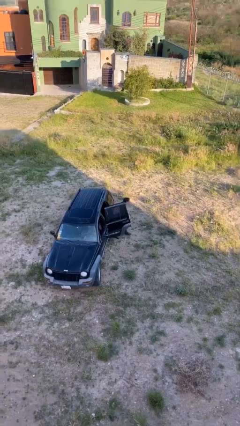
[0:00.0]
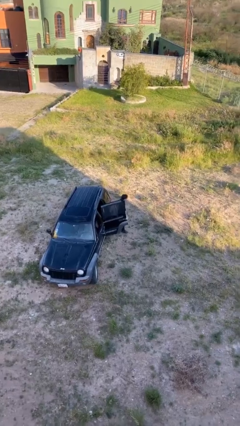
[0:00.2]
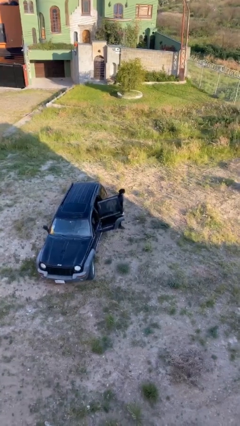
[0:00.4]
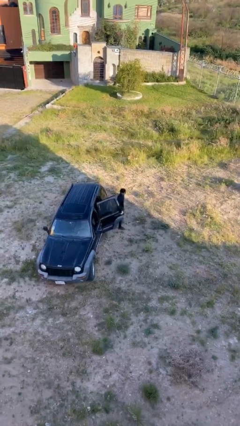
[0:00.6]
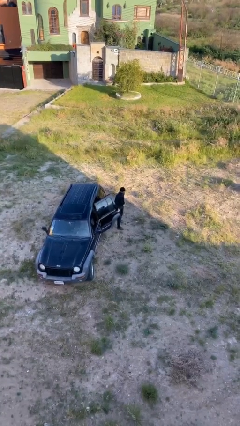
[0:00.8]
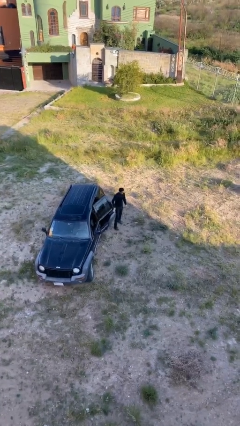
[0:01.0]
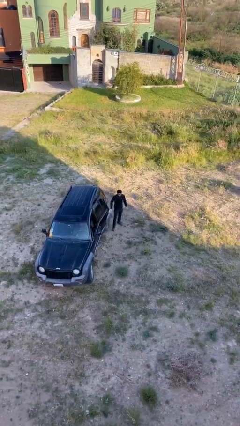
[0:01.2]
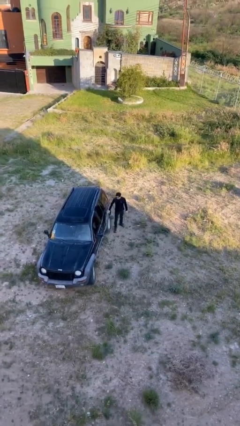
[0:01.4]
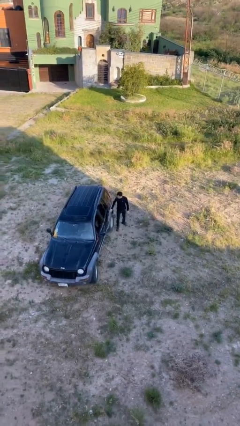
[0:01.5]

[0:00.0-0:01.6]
person exits car

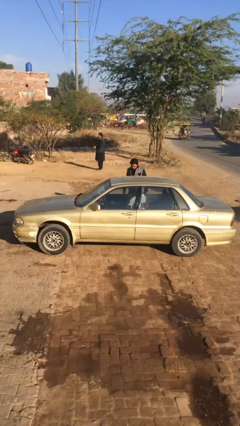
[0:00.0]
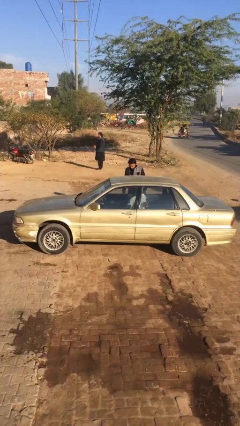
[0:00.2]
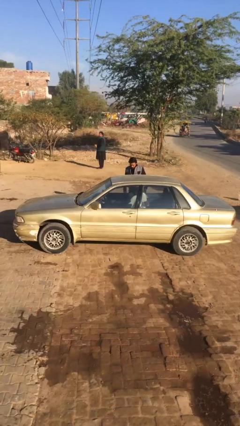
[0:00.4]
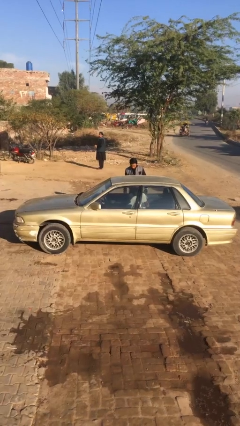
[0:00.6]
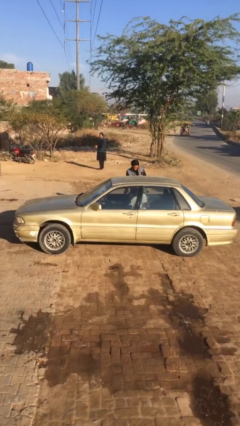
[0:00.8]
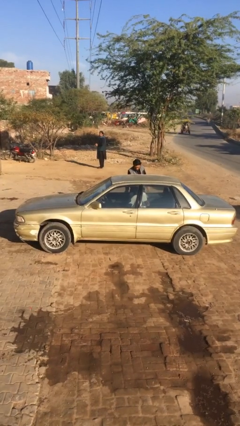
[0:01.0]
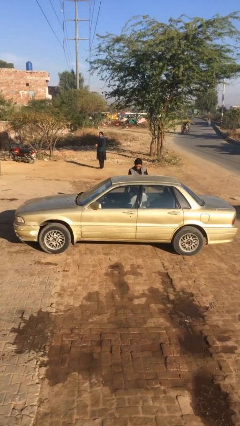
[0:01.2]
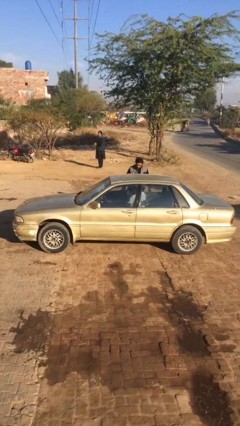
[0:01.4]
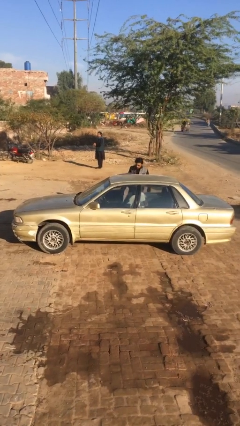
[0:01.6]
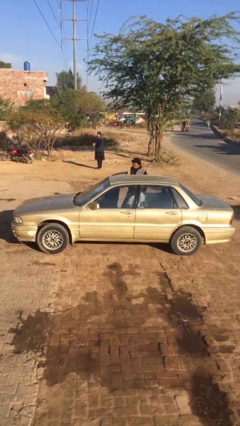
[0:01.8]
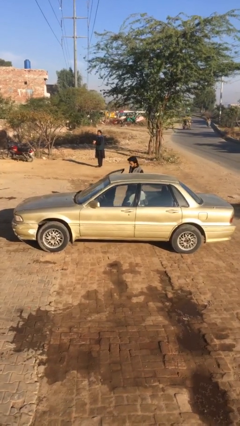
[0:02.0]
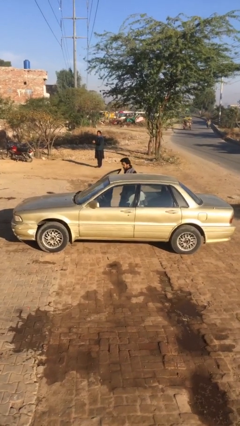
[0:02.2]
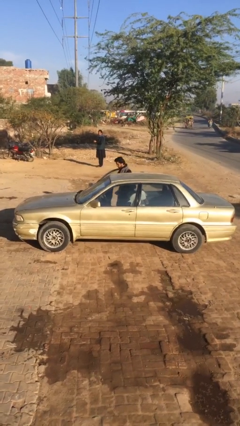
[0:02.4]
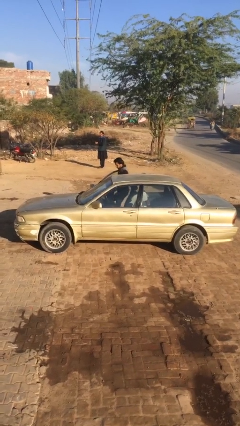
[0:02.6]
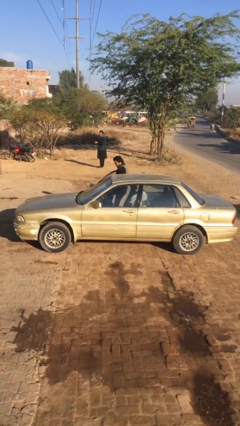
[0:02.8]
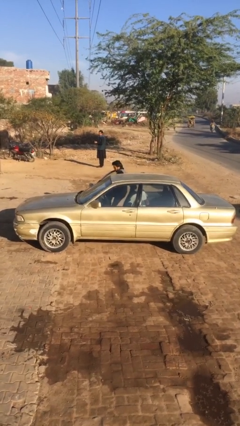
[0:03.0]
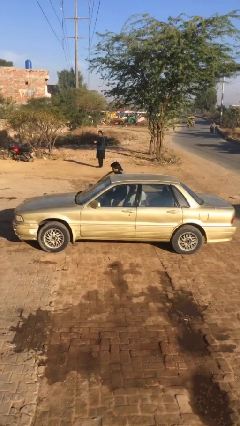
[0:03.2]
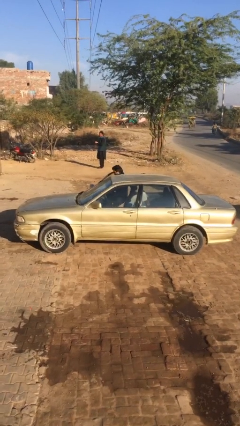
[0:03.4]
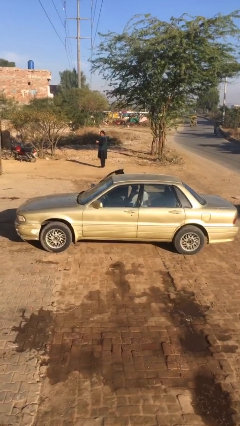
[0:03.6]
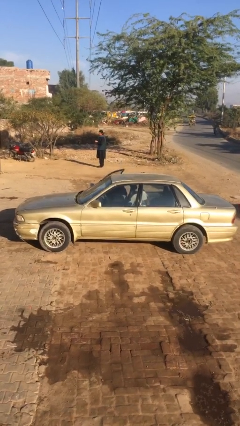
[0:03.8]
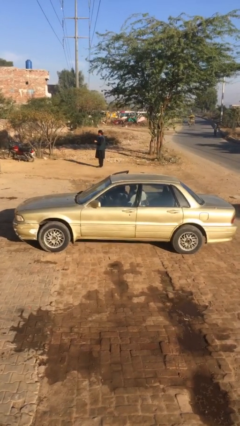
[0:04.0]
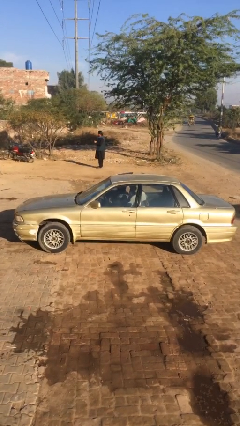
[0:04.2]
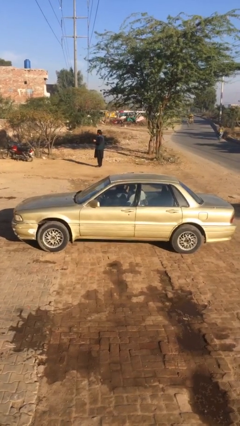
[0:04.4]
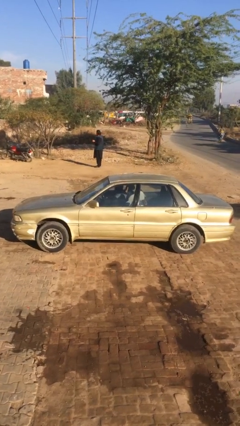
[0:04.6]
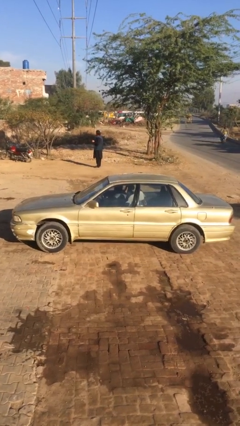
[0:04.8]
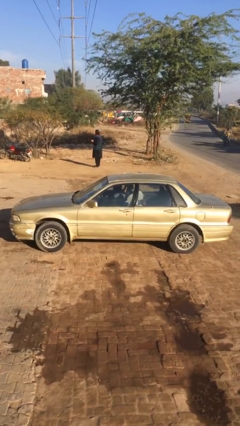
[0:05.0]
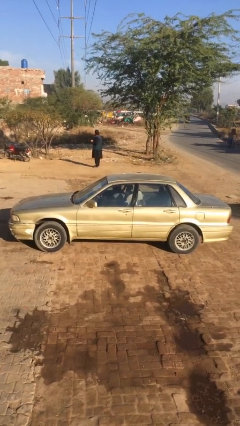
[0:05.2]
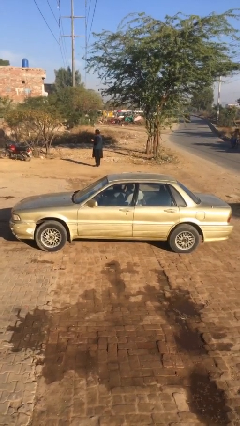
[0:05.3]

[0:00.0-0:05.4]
car picks up person

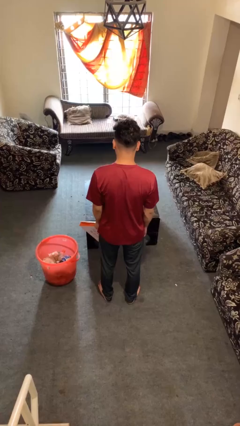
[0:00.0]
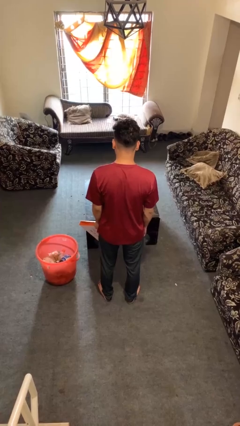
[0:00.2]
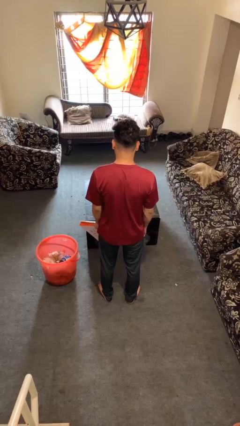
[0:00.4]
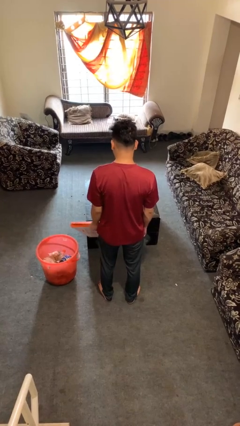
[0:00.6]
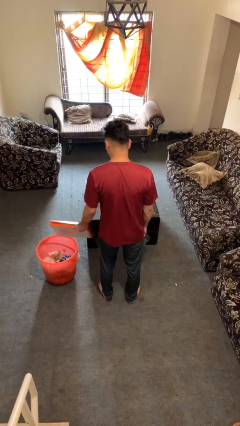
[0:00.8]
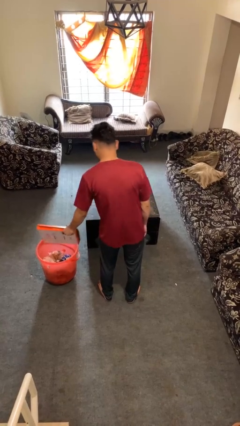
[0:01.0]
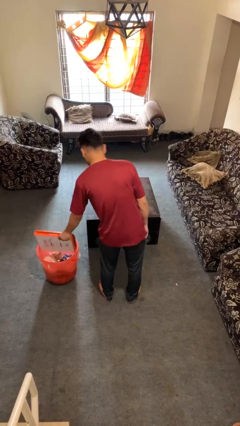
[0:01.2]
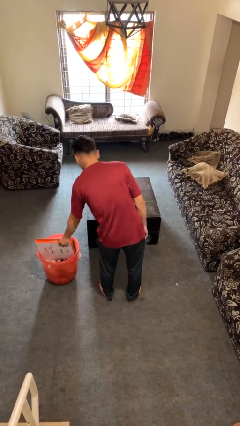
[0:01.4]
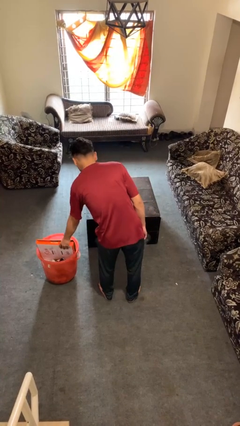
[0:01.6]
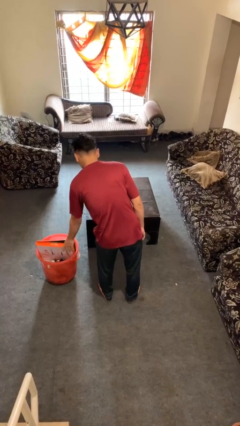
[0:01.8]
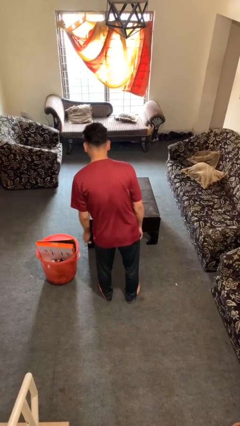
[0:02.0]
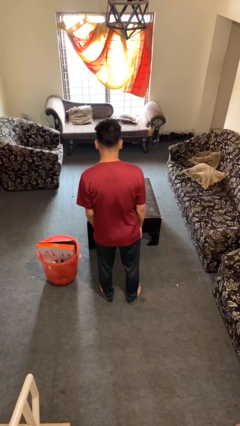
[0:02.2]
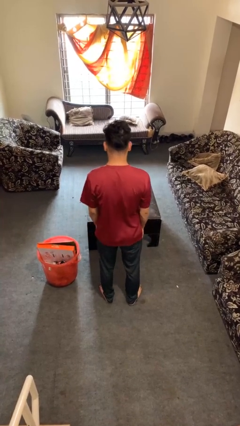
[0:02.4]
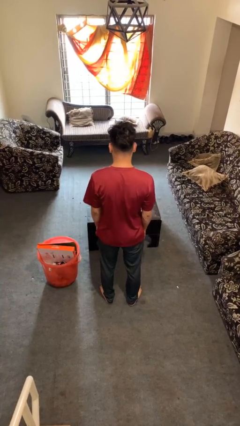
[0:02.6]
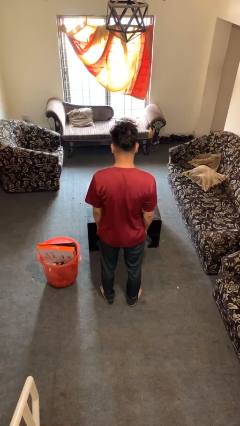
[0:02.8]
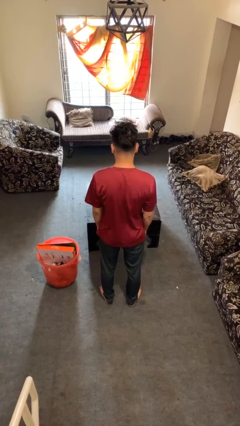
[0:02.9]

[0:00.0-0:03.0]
person puts object into basket

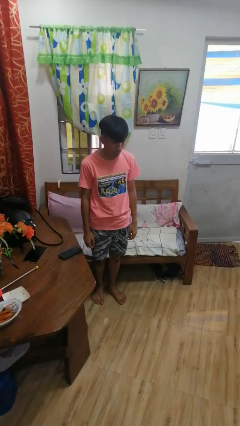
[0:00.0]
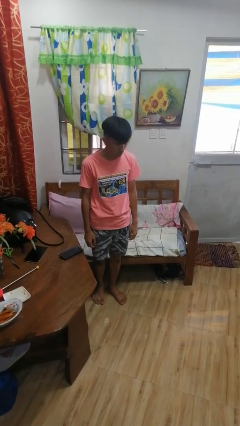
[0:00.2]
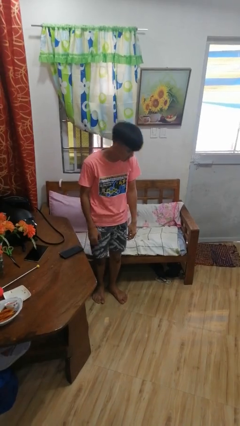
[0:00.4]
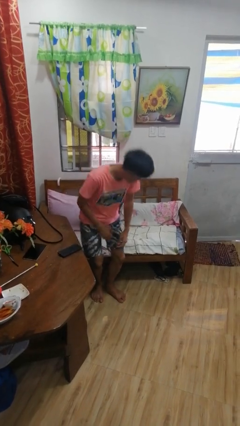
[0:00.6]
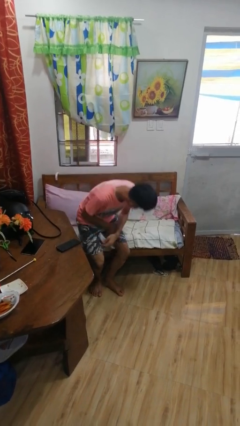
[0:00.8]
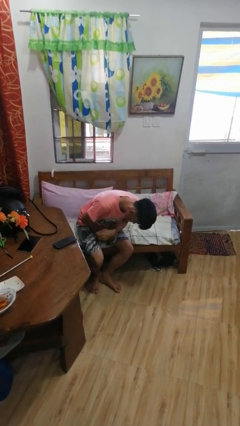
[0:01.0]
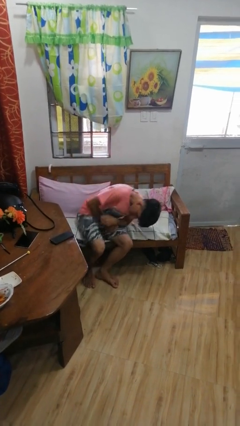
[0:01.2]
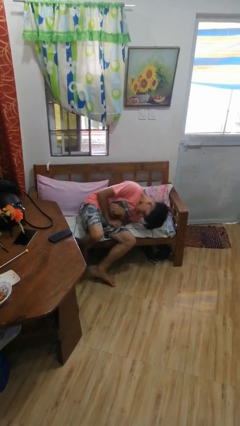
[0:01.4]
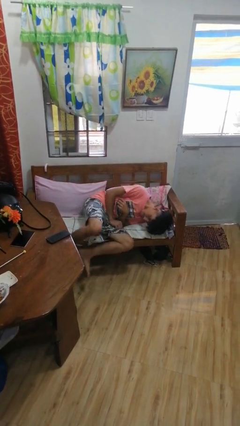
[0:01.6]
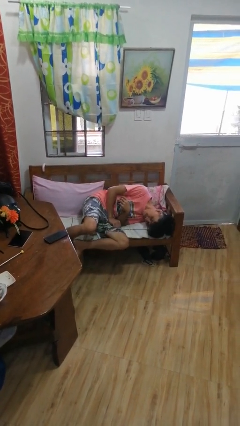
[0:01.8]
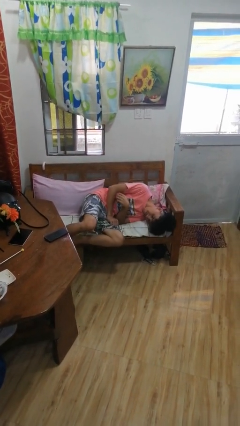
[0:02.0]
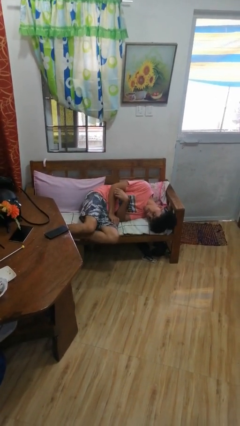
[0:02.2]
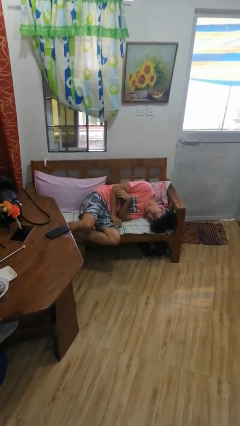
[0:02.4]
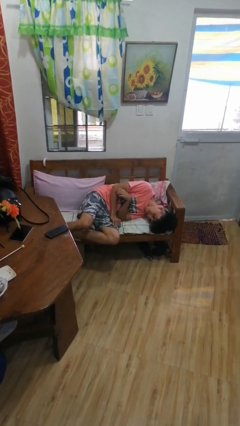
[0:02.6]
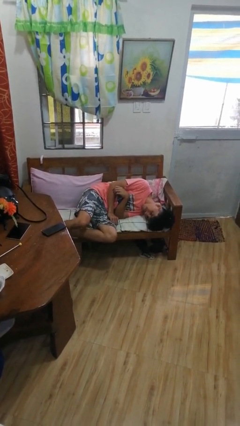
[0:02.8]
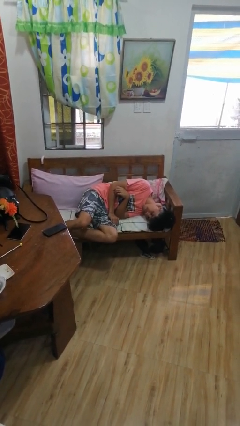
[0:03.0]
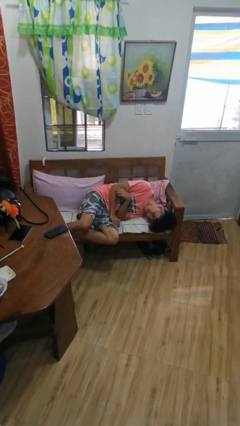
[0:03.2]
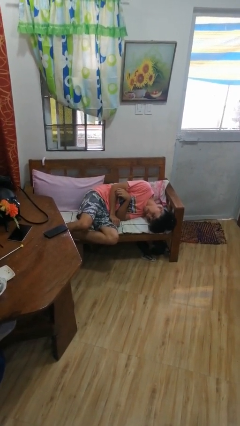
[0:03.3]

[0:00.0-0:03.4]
person lies down on couch

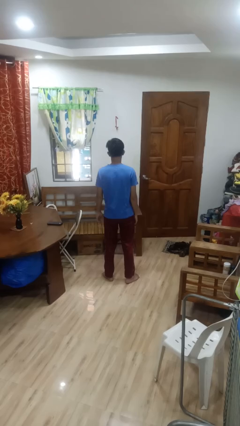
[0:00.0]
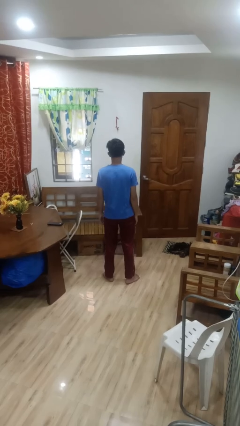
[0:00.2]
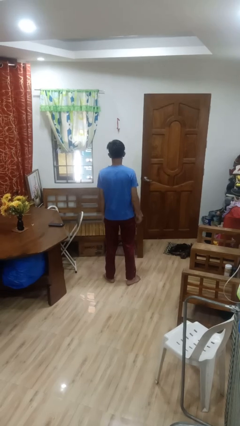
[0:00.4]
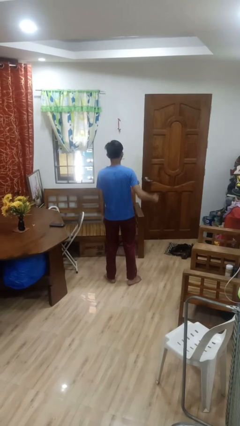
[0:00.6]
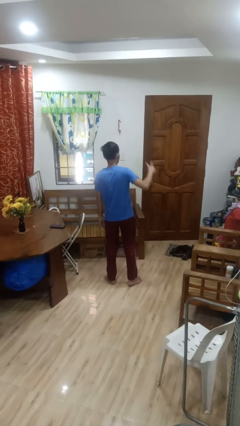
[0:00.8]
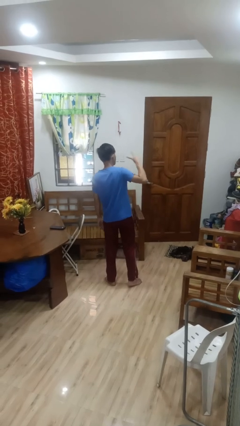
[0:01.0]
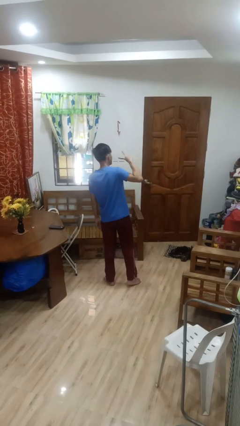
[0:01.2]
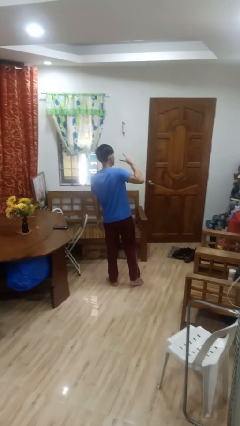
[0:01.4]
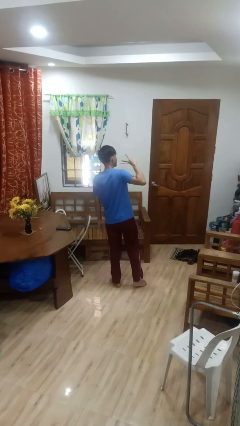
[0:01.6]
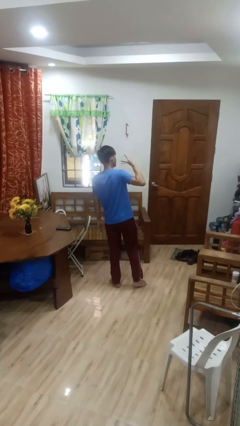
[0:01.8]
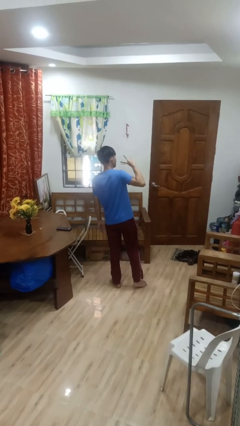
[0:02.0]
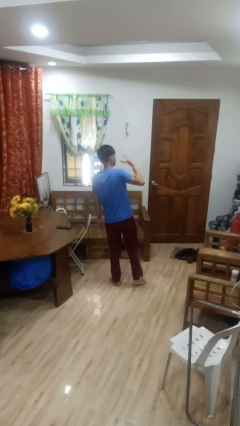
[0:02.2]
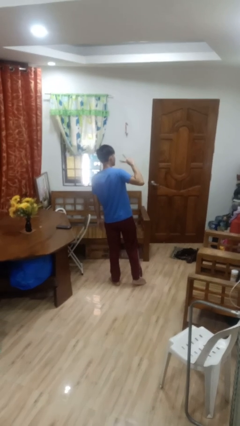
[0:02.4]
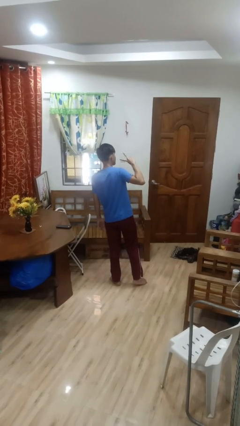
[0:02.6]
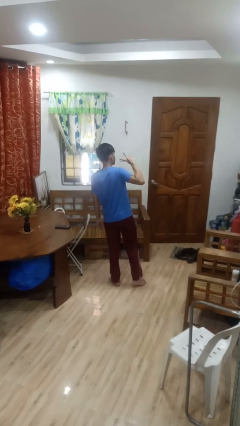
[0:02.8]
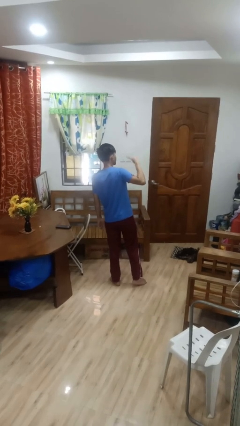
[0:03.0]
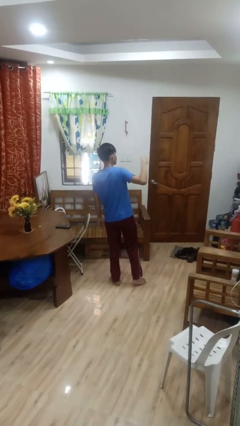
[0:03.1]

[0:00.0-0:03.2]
person gestures peace

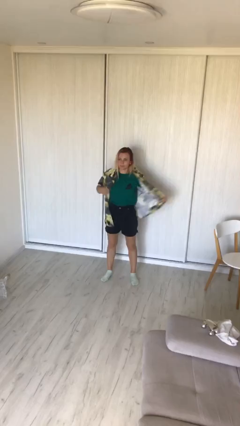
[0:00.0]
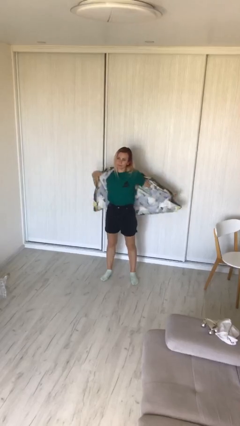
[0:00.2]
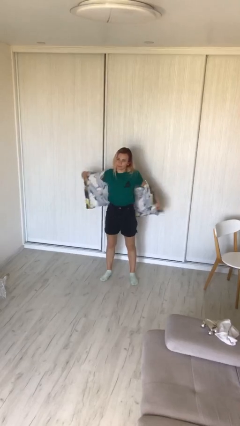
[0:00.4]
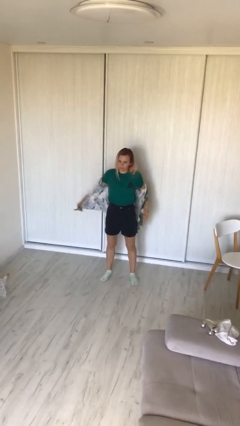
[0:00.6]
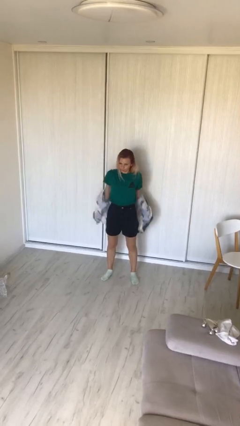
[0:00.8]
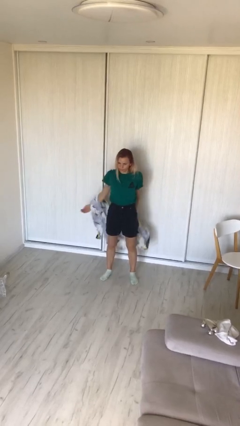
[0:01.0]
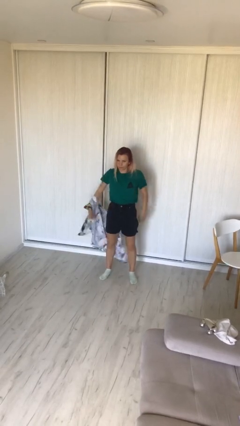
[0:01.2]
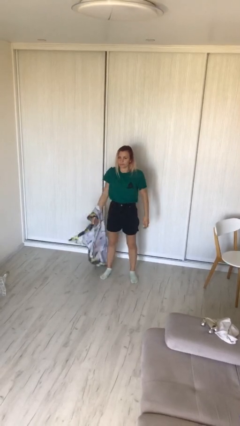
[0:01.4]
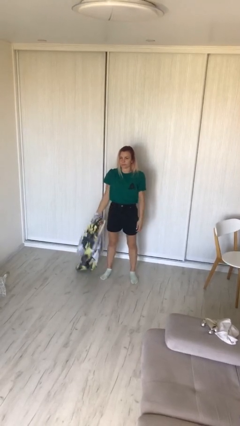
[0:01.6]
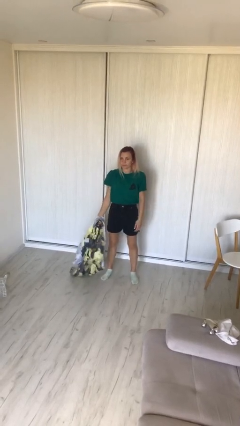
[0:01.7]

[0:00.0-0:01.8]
person takes off shirt
